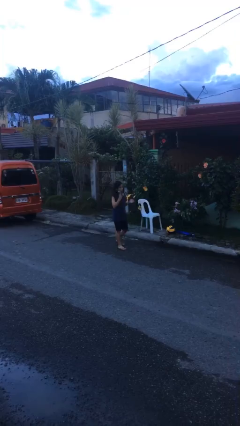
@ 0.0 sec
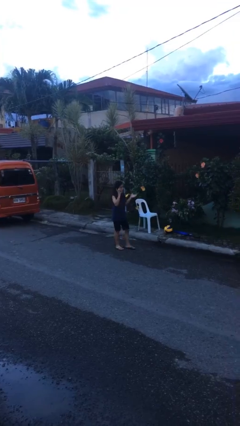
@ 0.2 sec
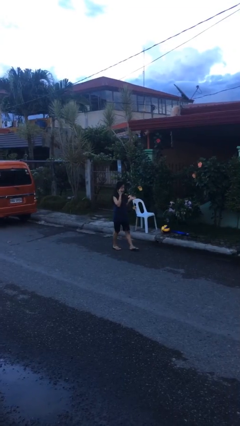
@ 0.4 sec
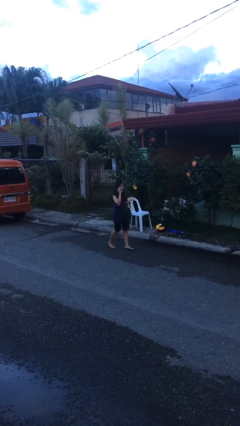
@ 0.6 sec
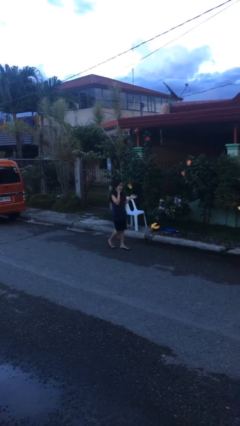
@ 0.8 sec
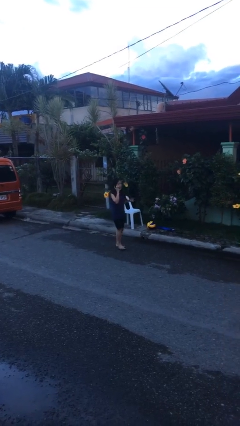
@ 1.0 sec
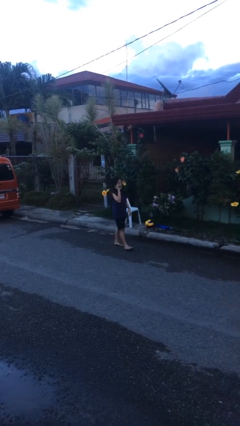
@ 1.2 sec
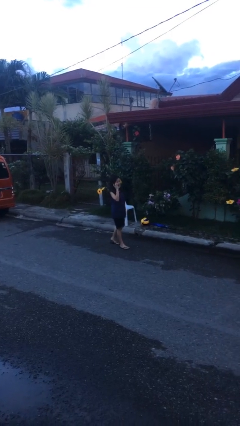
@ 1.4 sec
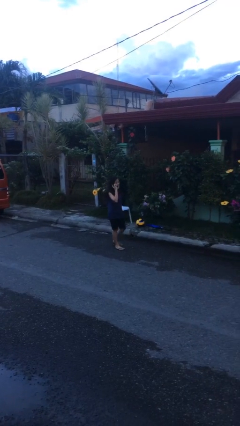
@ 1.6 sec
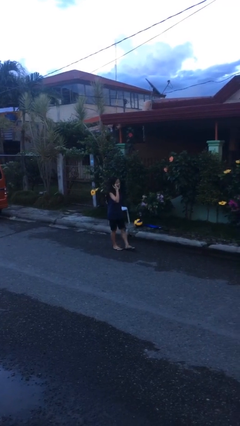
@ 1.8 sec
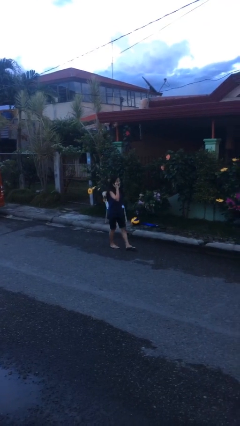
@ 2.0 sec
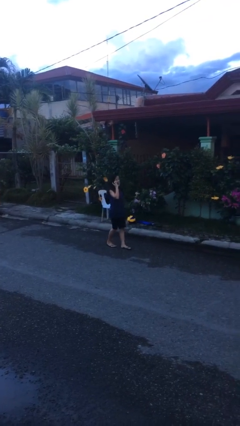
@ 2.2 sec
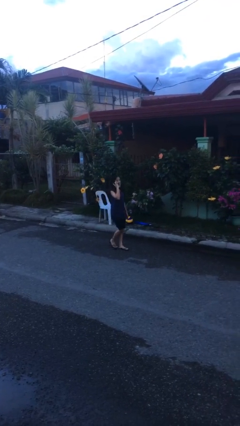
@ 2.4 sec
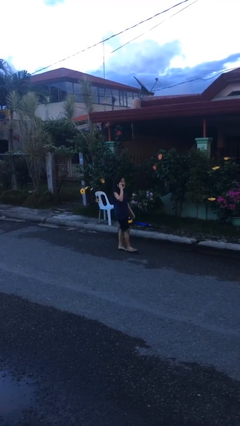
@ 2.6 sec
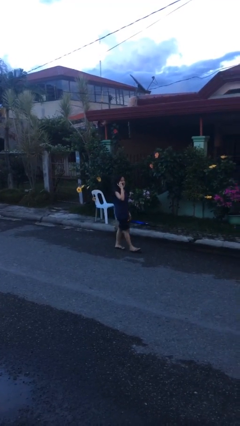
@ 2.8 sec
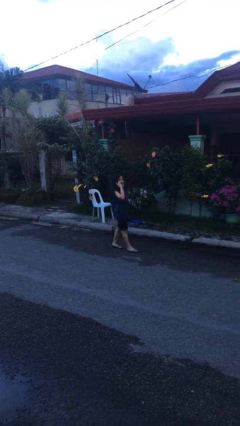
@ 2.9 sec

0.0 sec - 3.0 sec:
person talks on phone

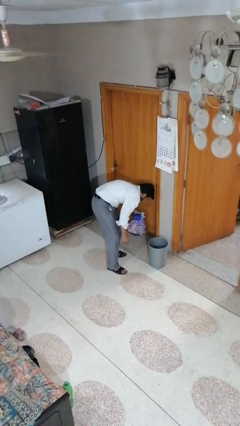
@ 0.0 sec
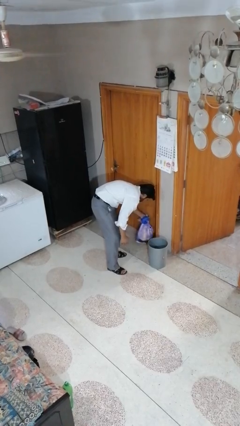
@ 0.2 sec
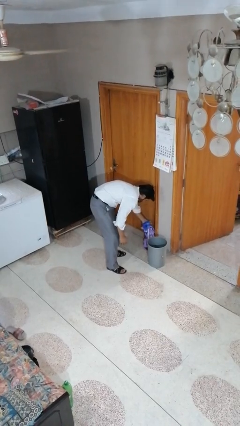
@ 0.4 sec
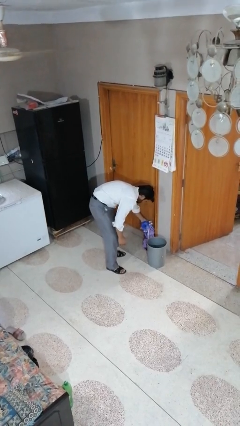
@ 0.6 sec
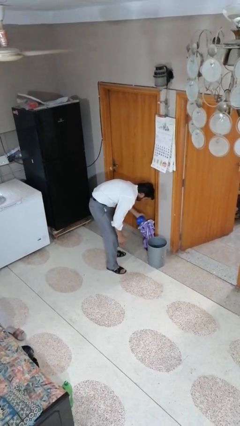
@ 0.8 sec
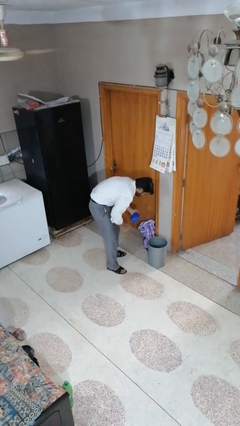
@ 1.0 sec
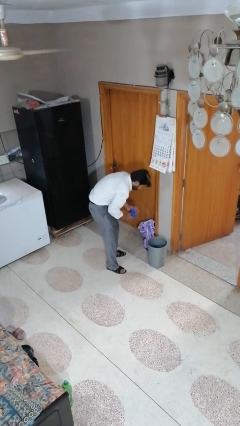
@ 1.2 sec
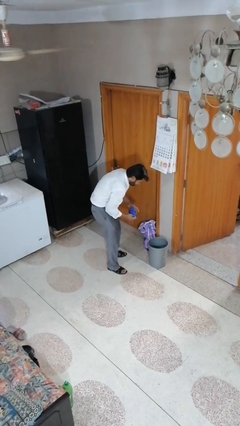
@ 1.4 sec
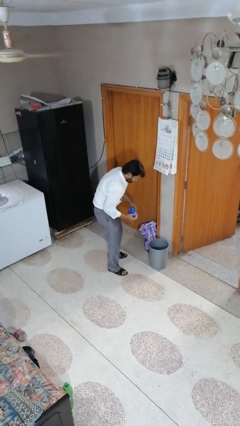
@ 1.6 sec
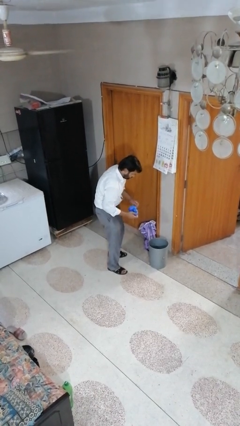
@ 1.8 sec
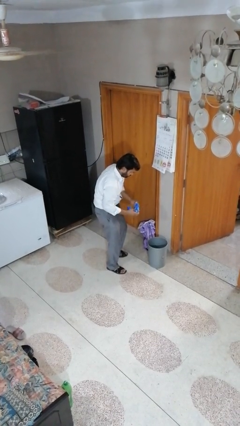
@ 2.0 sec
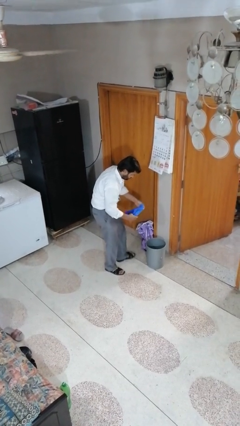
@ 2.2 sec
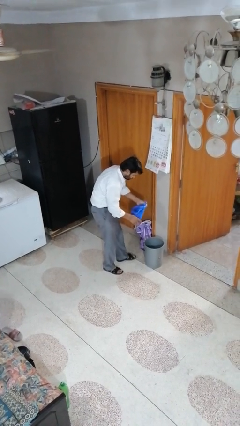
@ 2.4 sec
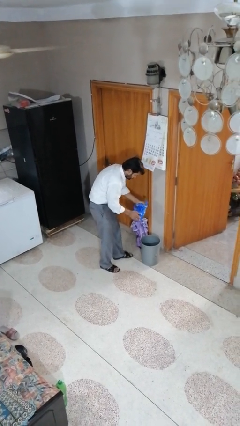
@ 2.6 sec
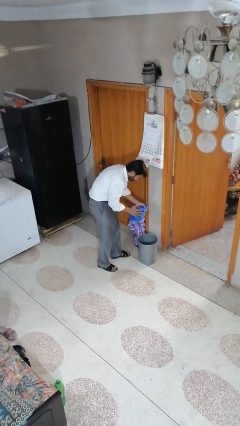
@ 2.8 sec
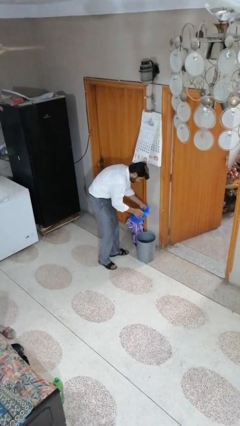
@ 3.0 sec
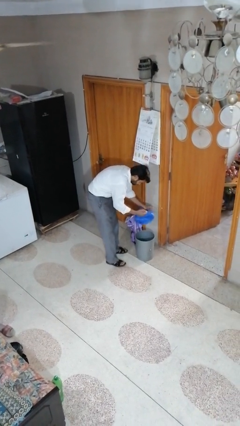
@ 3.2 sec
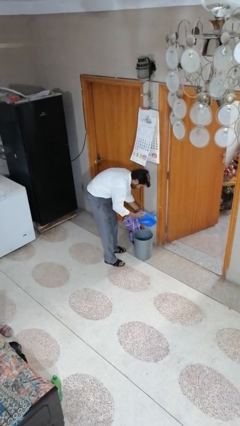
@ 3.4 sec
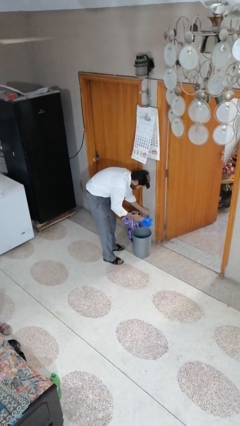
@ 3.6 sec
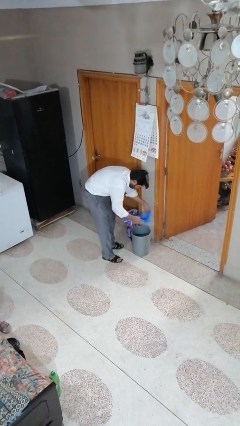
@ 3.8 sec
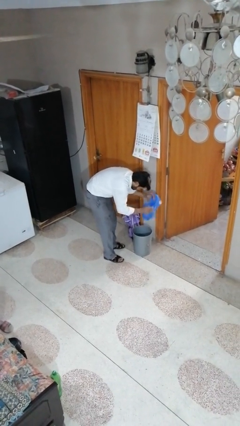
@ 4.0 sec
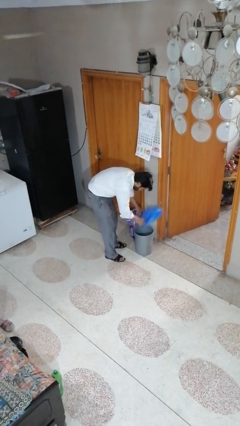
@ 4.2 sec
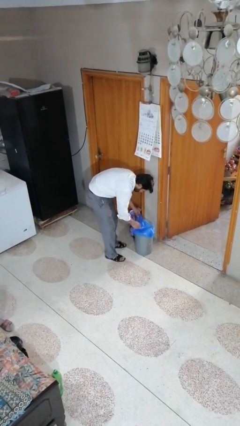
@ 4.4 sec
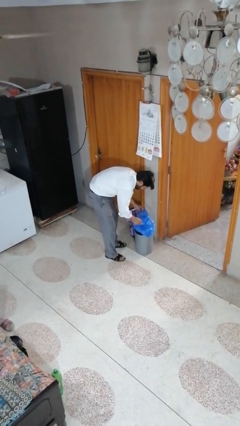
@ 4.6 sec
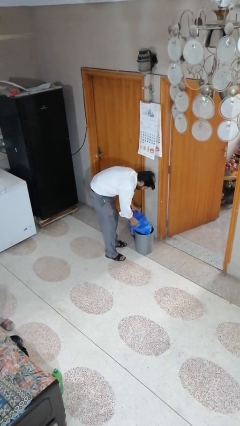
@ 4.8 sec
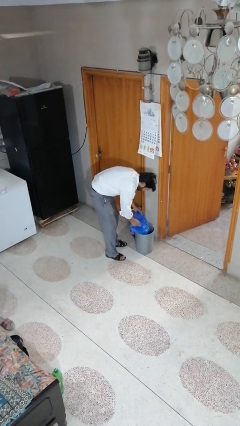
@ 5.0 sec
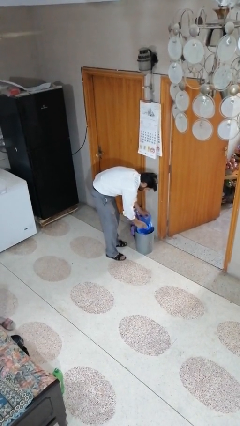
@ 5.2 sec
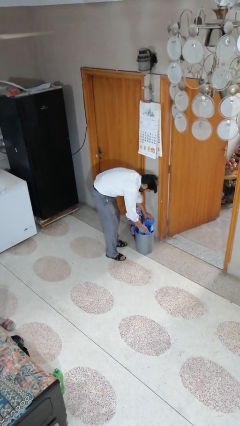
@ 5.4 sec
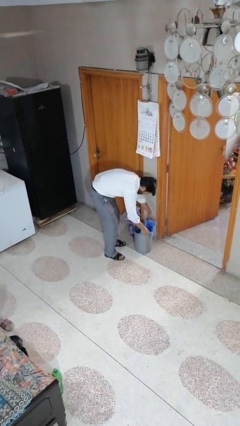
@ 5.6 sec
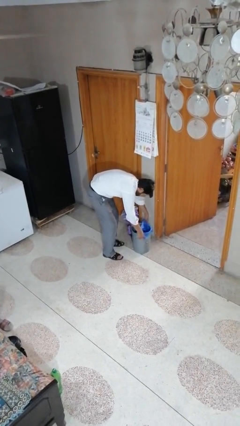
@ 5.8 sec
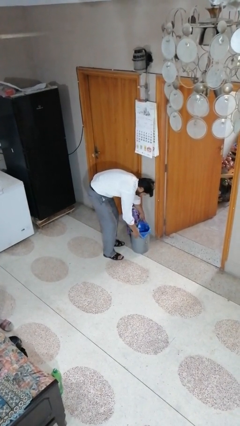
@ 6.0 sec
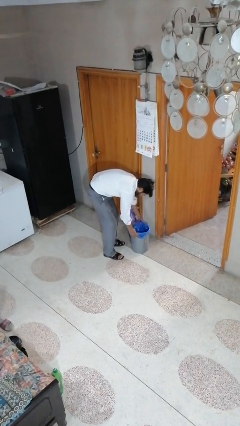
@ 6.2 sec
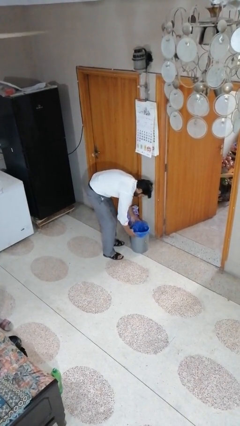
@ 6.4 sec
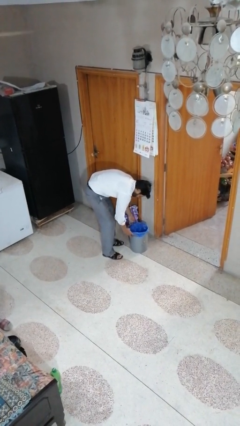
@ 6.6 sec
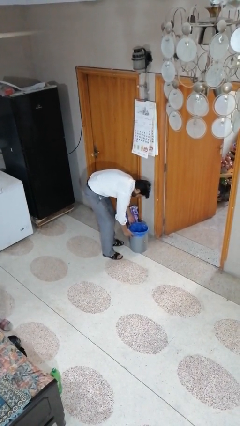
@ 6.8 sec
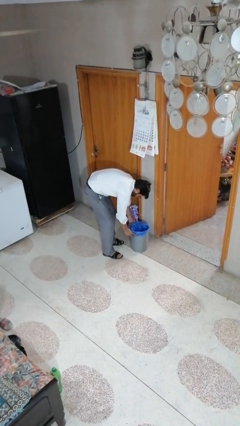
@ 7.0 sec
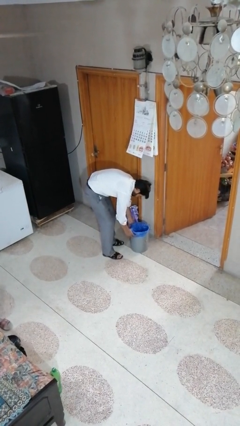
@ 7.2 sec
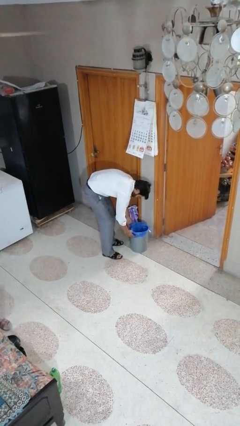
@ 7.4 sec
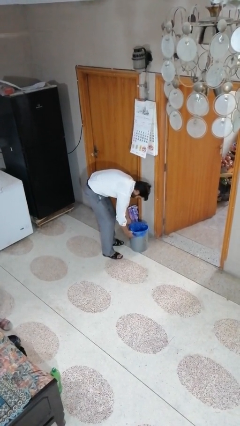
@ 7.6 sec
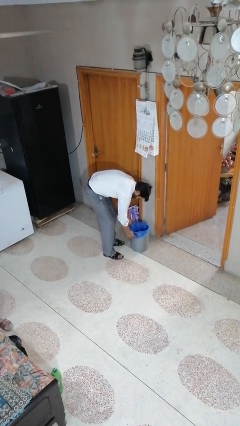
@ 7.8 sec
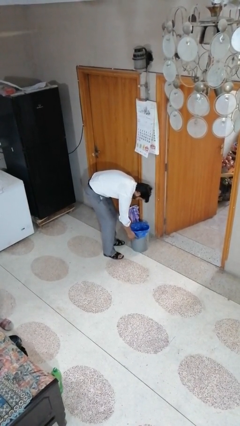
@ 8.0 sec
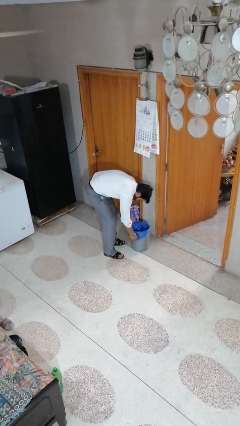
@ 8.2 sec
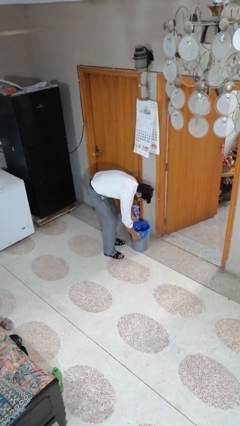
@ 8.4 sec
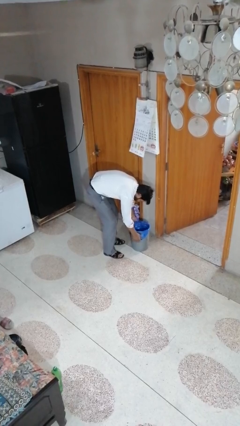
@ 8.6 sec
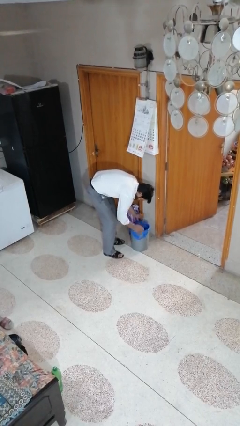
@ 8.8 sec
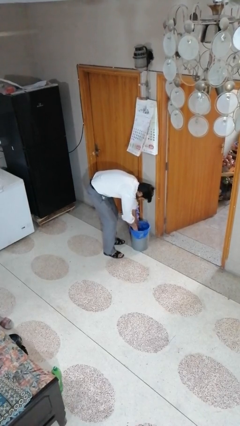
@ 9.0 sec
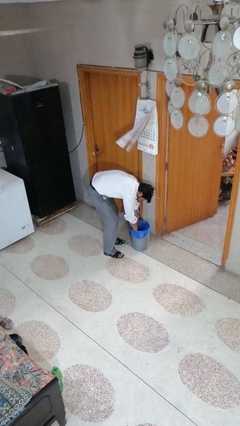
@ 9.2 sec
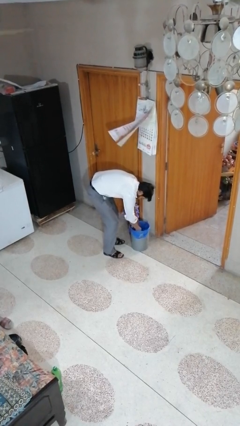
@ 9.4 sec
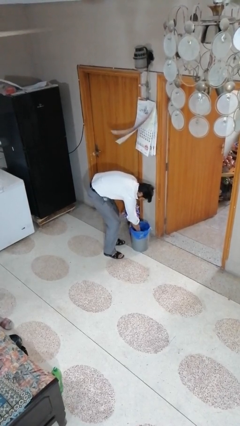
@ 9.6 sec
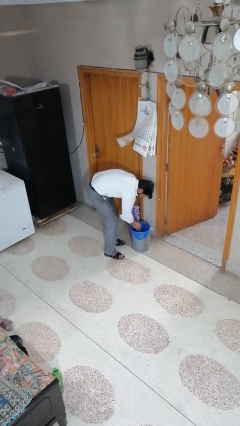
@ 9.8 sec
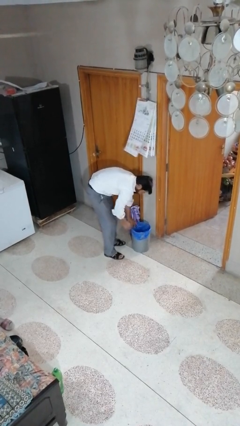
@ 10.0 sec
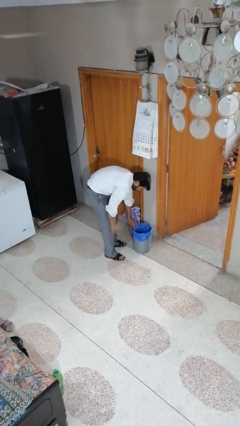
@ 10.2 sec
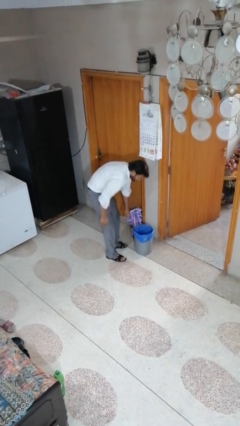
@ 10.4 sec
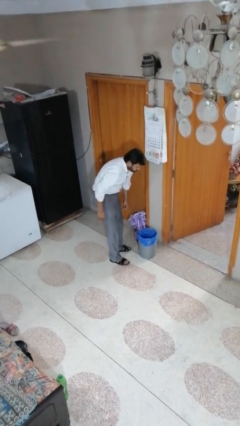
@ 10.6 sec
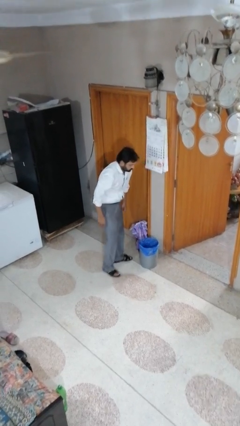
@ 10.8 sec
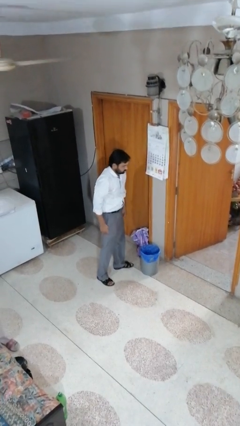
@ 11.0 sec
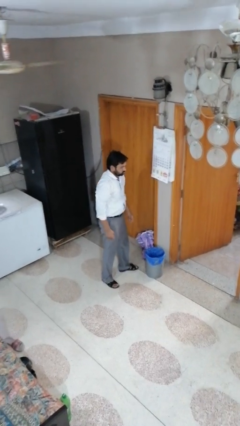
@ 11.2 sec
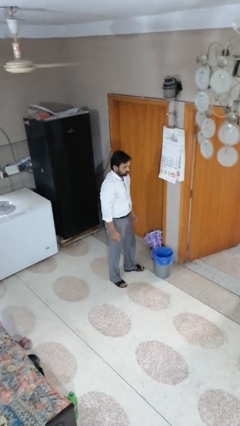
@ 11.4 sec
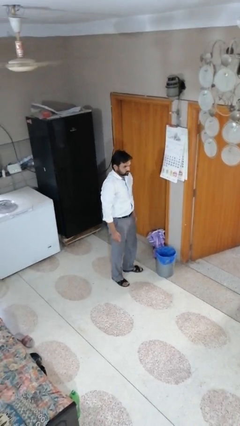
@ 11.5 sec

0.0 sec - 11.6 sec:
person inserts trashbag into trashcan

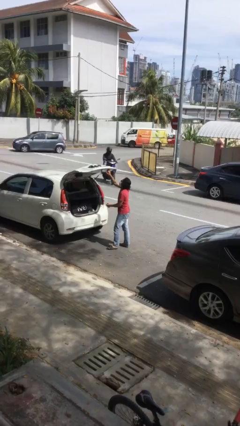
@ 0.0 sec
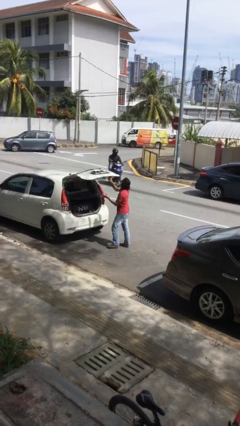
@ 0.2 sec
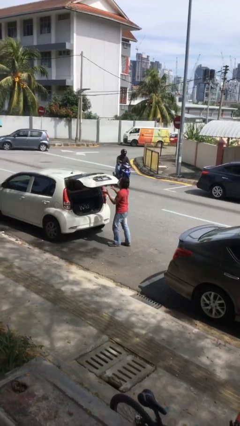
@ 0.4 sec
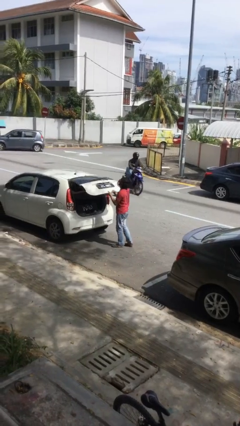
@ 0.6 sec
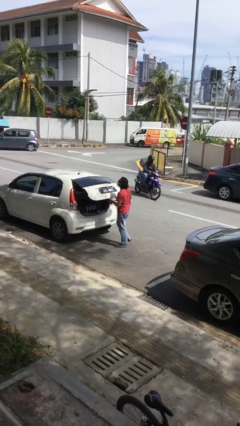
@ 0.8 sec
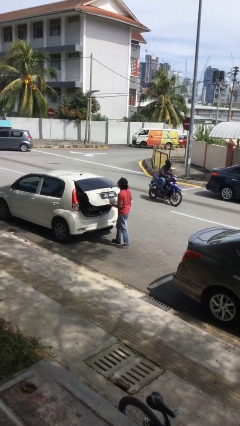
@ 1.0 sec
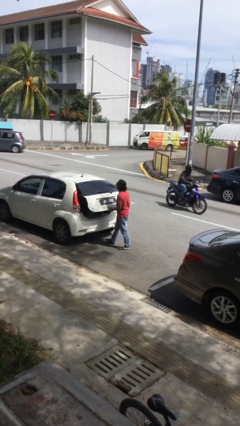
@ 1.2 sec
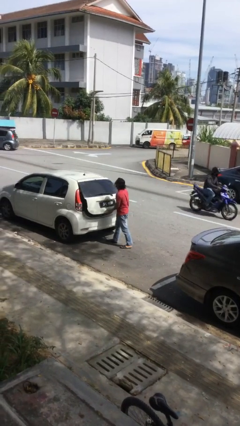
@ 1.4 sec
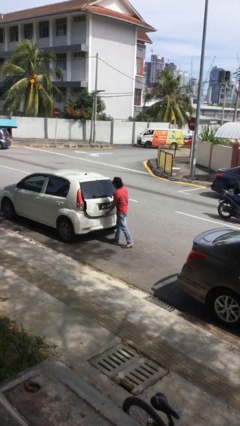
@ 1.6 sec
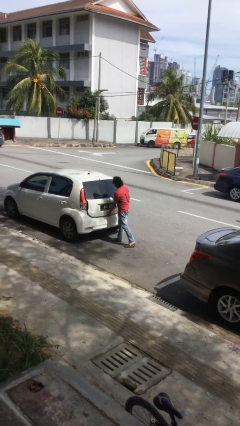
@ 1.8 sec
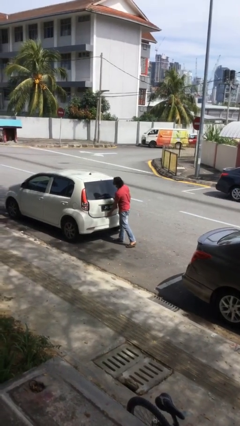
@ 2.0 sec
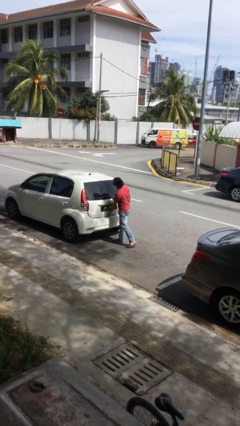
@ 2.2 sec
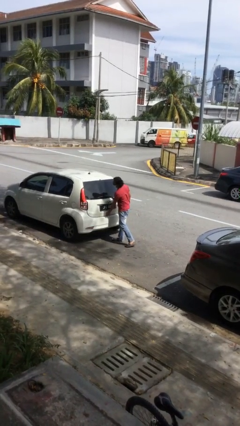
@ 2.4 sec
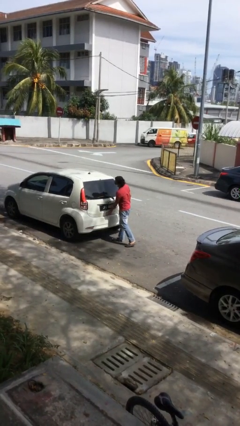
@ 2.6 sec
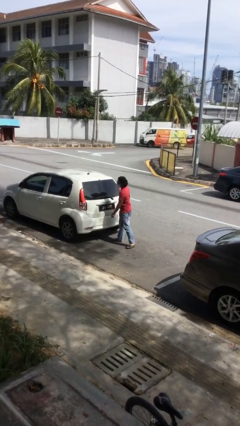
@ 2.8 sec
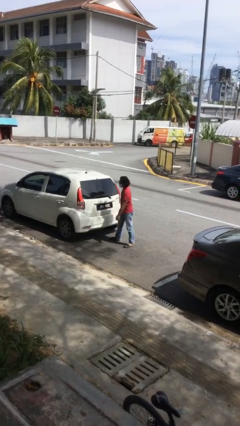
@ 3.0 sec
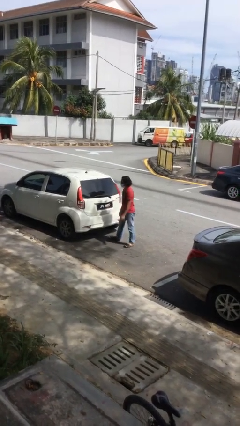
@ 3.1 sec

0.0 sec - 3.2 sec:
person closes car trunk
